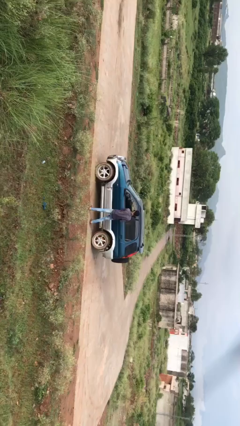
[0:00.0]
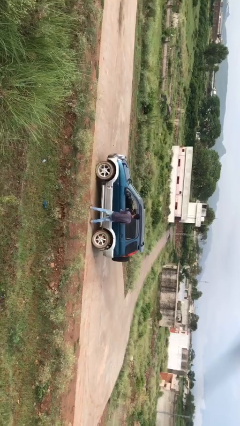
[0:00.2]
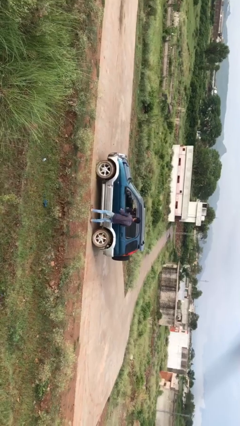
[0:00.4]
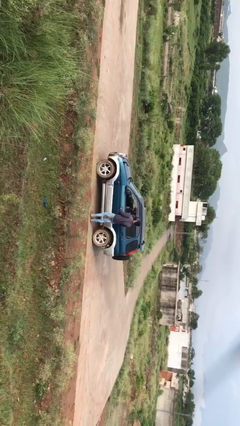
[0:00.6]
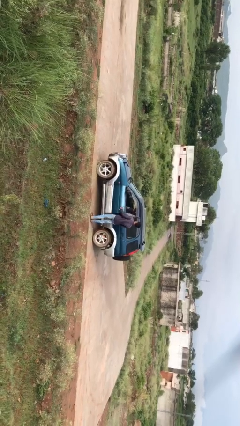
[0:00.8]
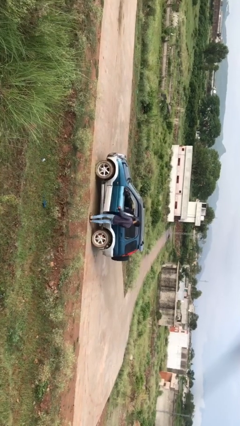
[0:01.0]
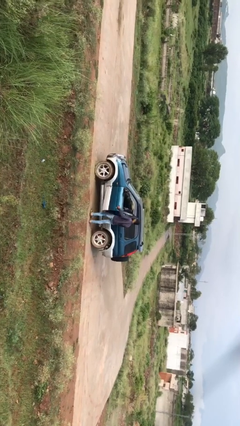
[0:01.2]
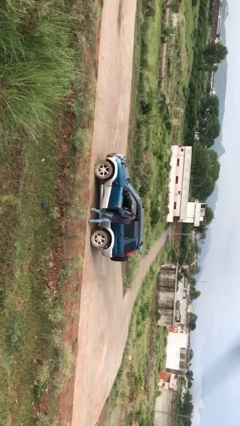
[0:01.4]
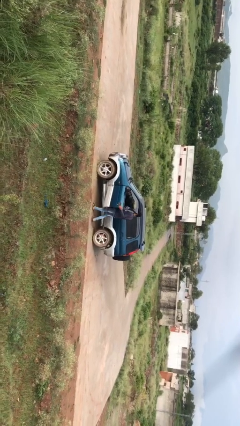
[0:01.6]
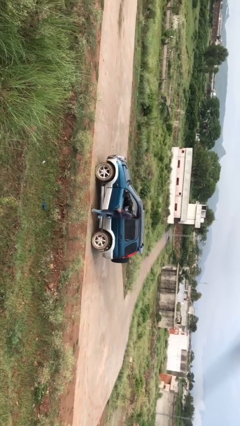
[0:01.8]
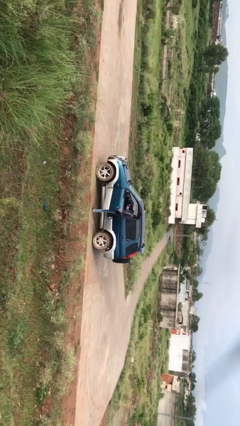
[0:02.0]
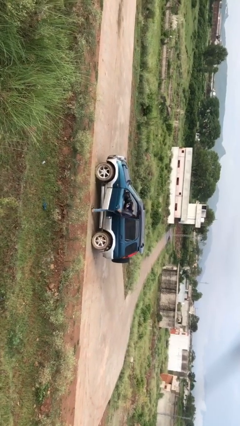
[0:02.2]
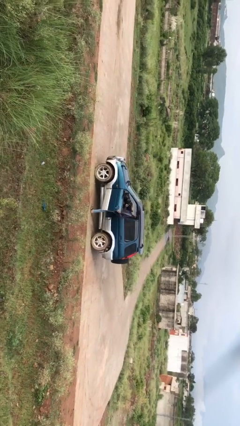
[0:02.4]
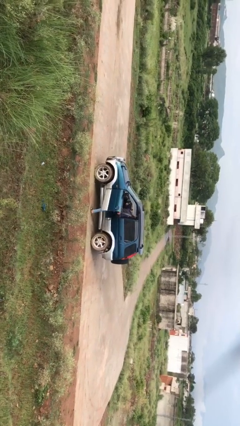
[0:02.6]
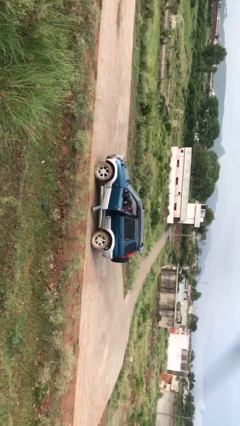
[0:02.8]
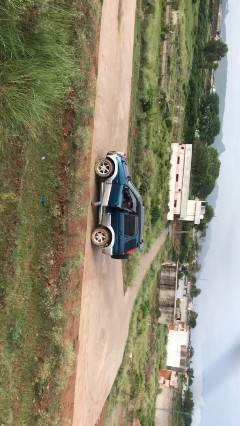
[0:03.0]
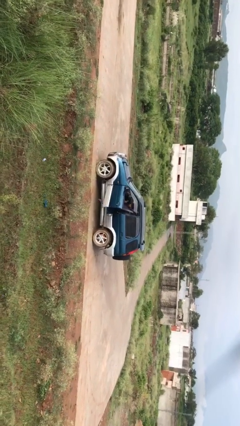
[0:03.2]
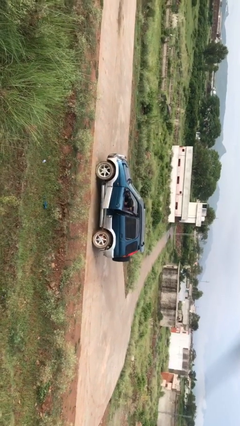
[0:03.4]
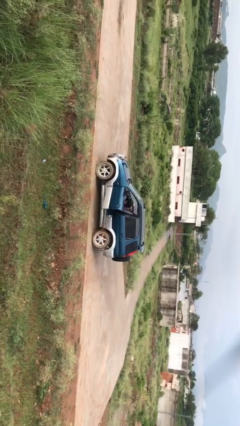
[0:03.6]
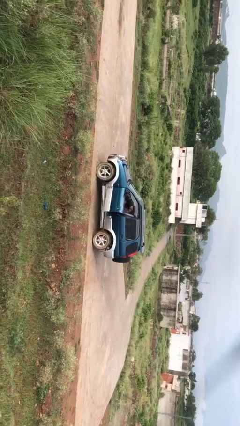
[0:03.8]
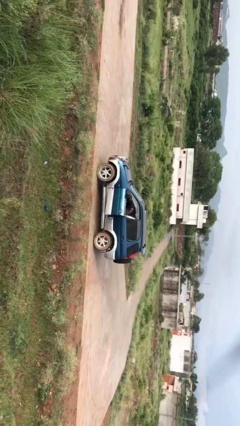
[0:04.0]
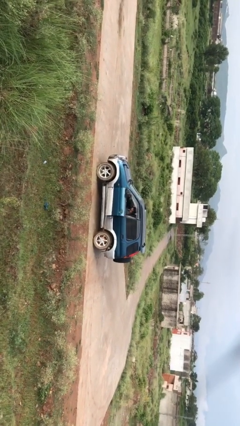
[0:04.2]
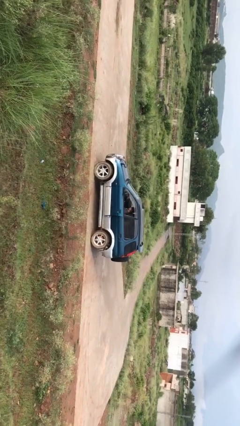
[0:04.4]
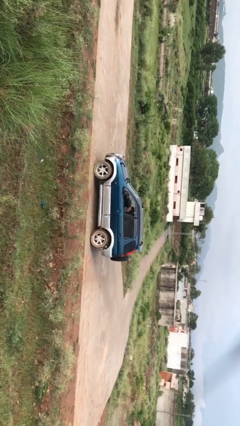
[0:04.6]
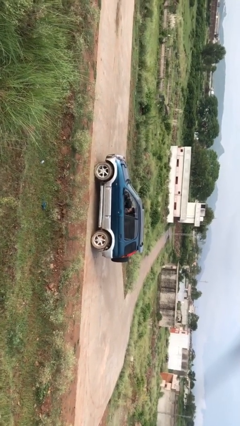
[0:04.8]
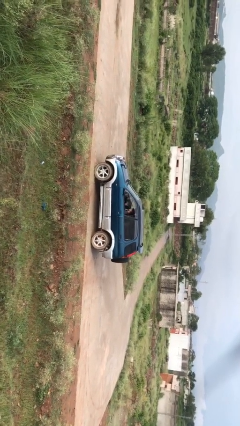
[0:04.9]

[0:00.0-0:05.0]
car picks up person

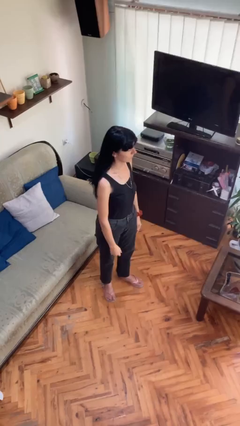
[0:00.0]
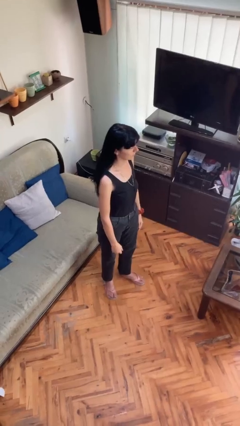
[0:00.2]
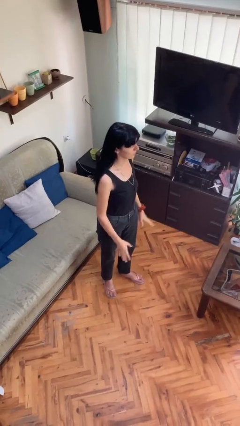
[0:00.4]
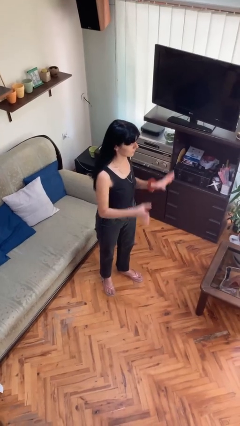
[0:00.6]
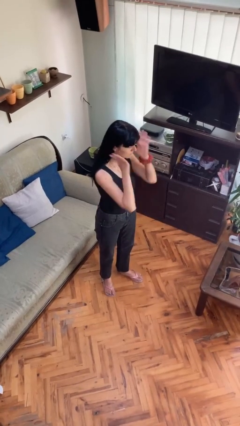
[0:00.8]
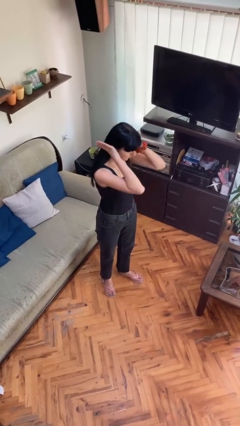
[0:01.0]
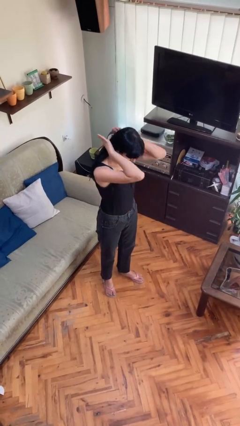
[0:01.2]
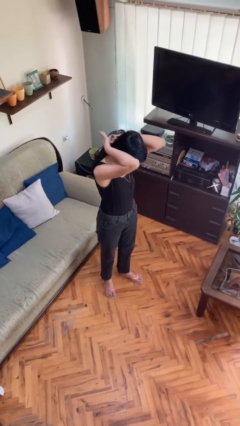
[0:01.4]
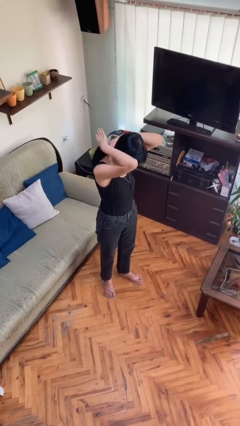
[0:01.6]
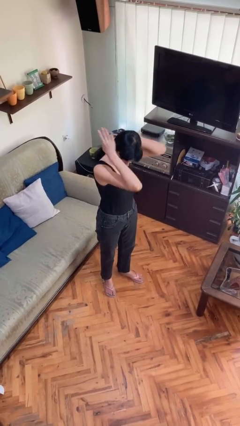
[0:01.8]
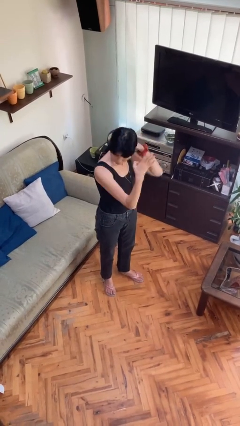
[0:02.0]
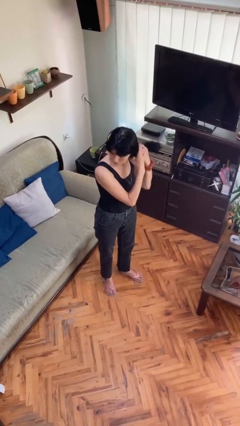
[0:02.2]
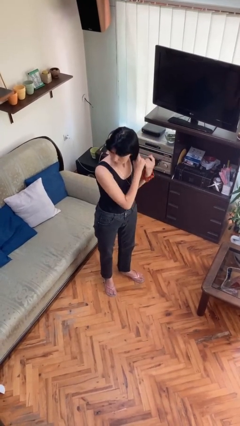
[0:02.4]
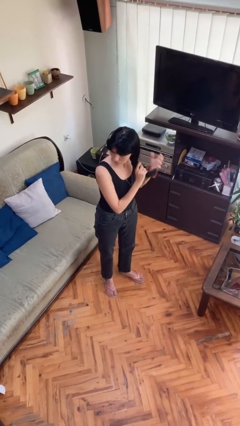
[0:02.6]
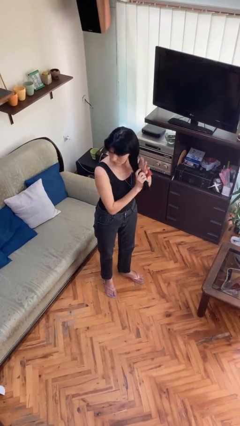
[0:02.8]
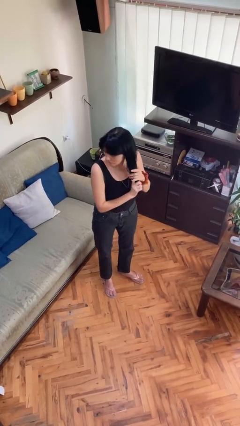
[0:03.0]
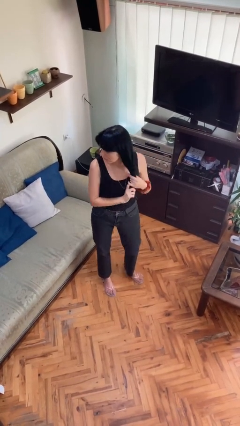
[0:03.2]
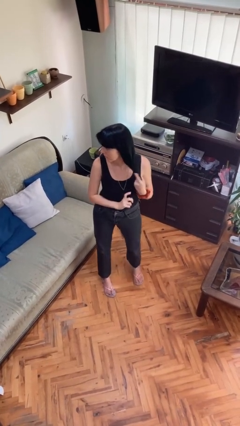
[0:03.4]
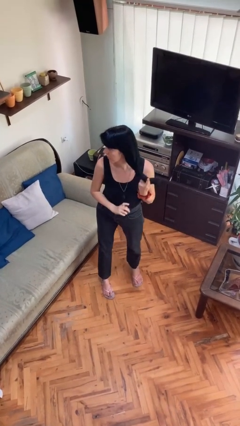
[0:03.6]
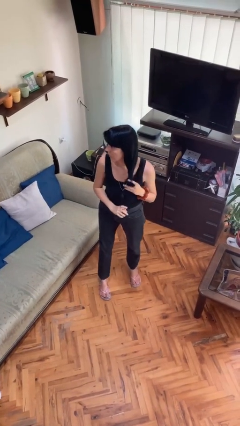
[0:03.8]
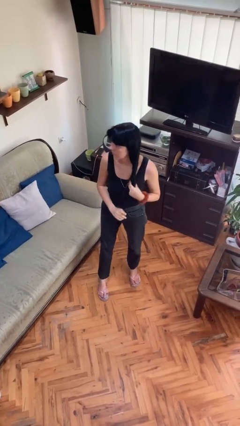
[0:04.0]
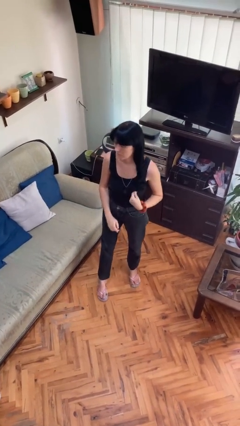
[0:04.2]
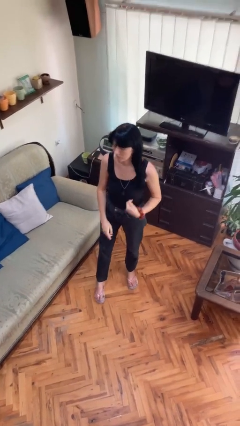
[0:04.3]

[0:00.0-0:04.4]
person strokes hair

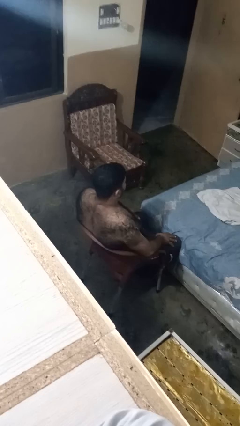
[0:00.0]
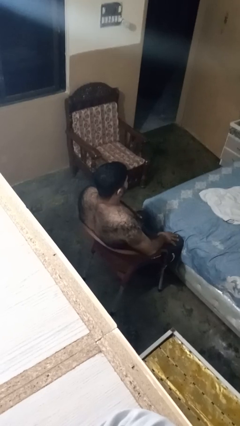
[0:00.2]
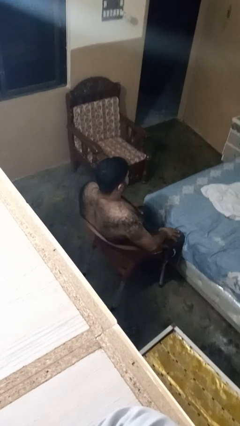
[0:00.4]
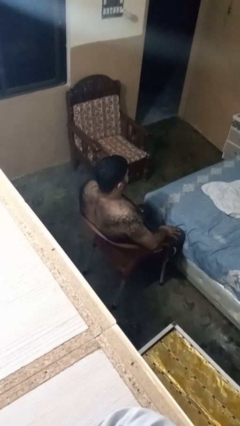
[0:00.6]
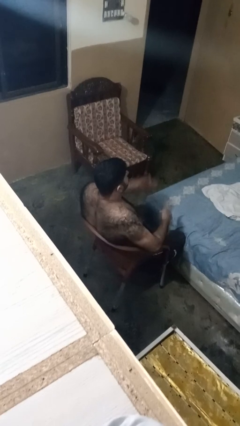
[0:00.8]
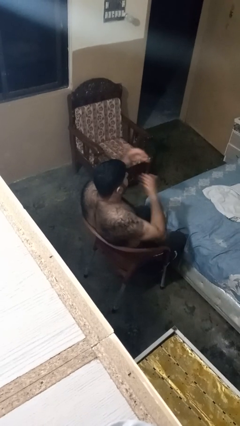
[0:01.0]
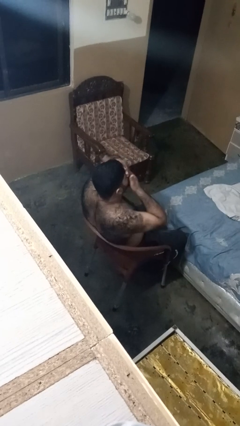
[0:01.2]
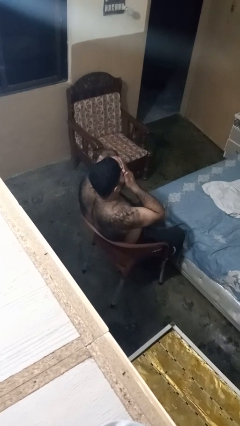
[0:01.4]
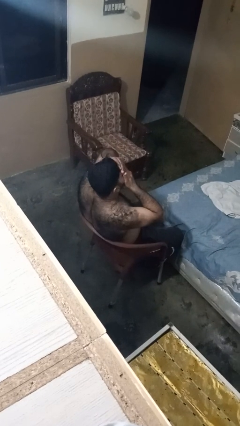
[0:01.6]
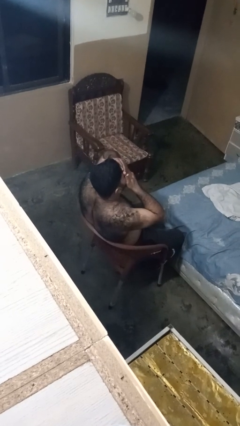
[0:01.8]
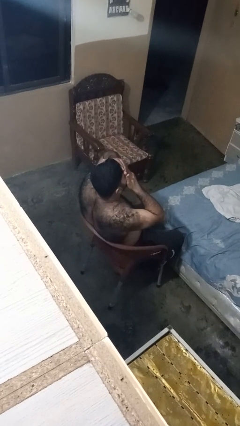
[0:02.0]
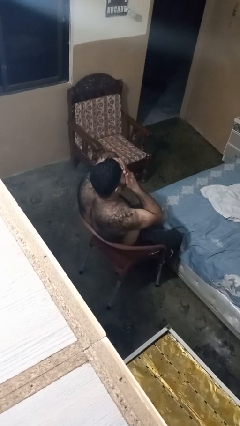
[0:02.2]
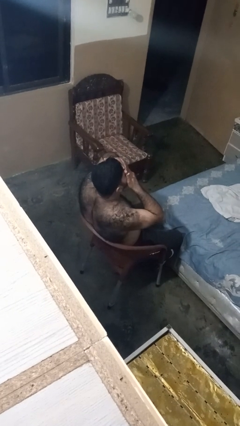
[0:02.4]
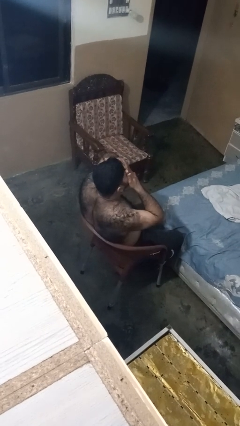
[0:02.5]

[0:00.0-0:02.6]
person covers face with hands

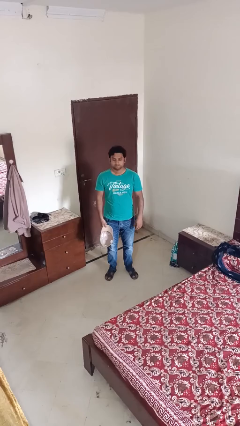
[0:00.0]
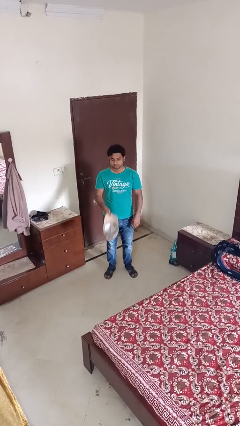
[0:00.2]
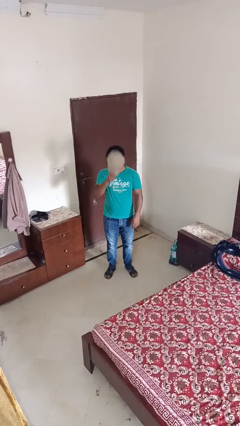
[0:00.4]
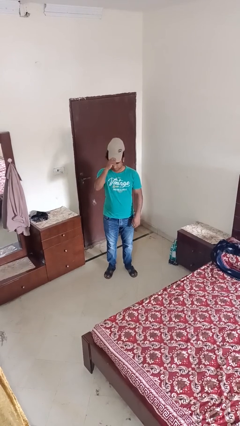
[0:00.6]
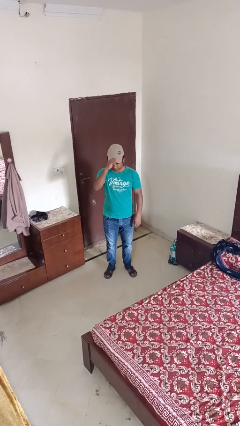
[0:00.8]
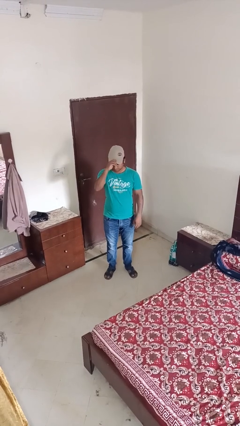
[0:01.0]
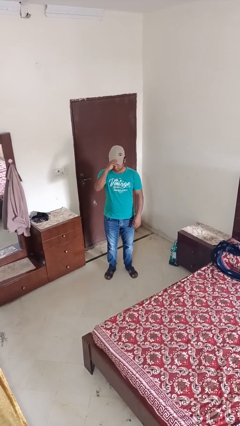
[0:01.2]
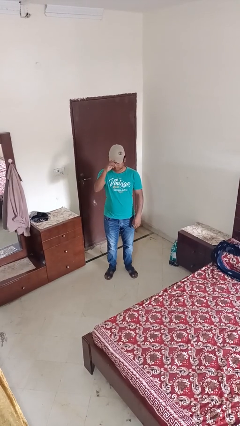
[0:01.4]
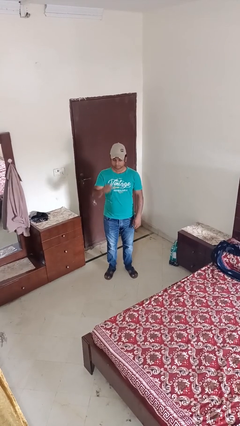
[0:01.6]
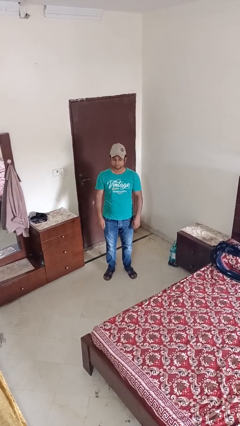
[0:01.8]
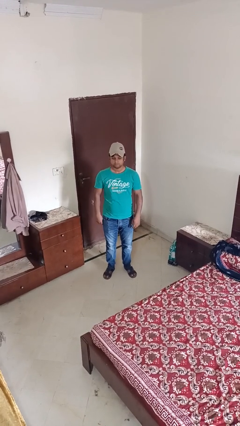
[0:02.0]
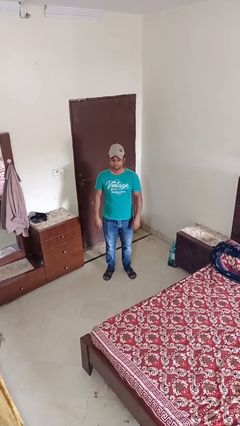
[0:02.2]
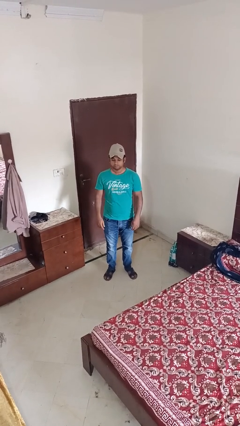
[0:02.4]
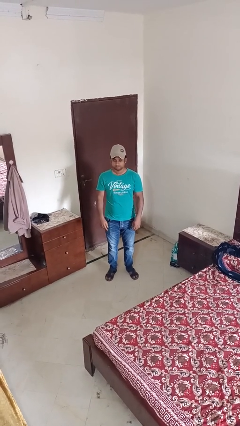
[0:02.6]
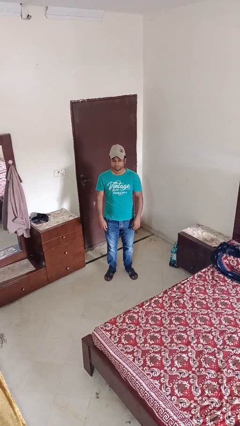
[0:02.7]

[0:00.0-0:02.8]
person puts on hat

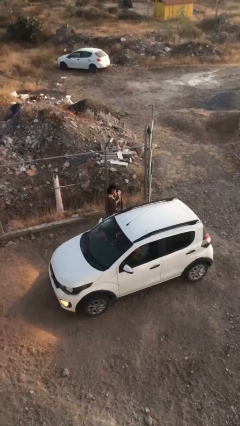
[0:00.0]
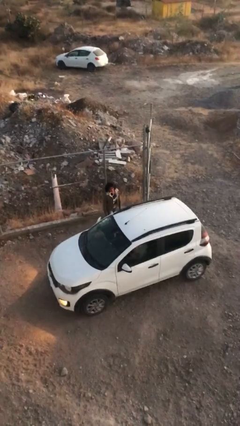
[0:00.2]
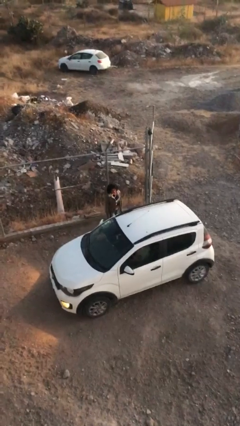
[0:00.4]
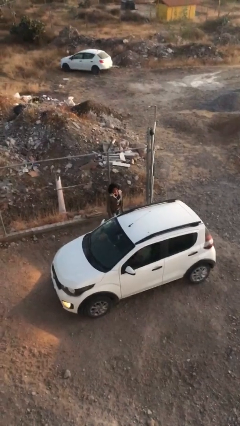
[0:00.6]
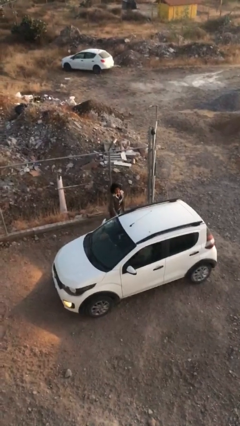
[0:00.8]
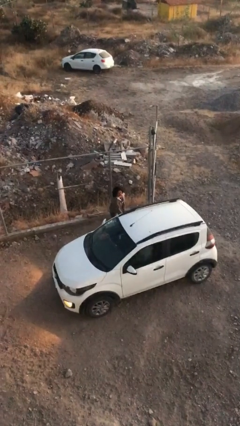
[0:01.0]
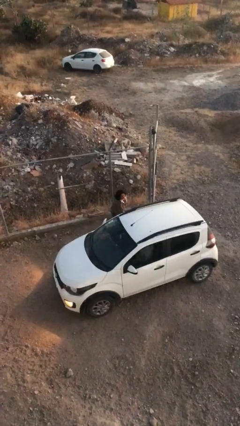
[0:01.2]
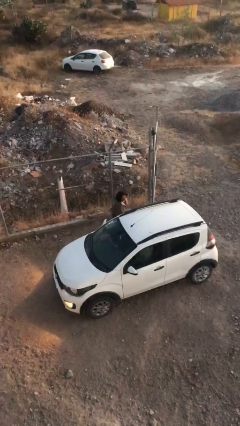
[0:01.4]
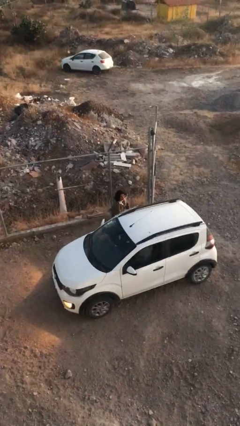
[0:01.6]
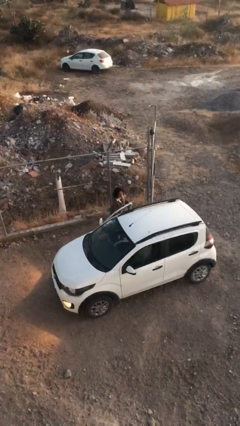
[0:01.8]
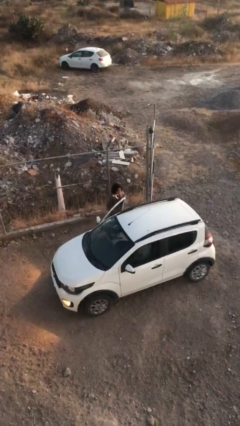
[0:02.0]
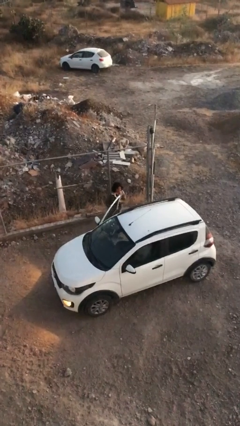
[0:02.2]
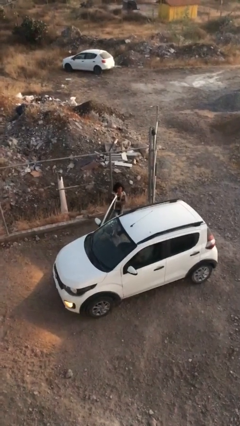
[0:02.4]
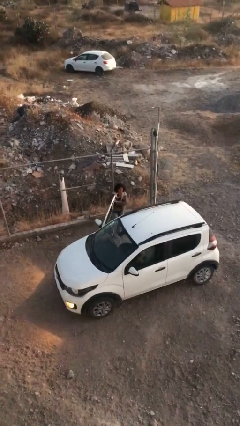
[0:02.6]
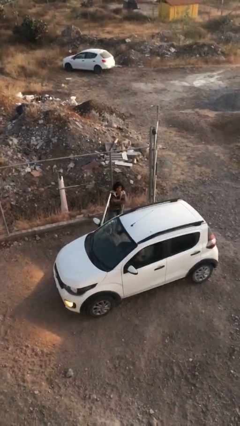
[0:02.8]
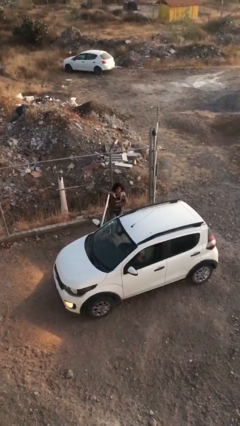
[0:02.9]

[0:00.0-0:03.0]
person opens car door
